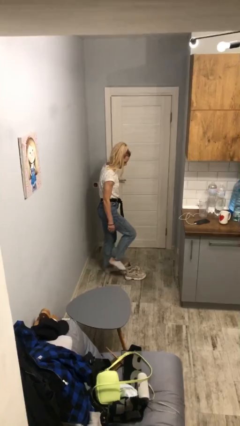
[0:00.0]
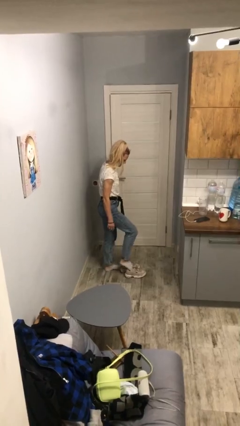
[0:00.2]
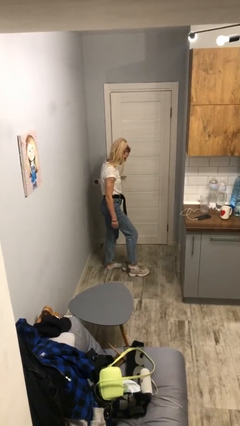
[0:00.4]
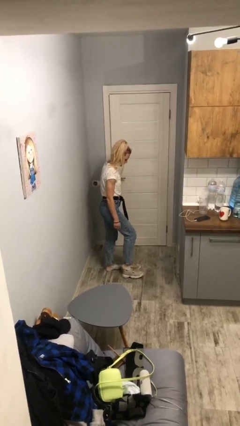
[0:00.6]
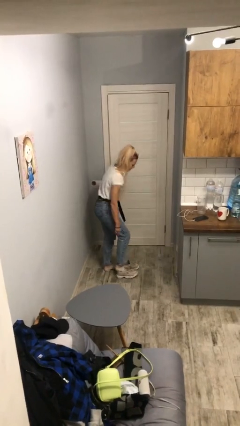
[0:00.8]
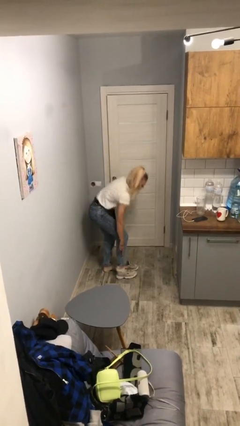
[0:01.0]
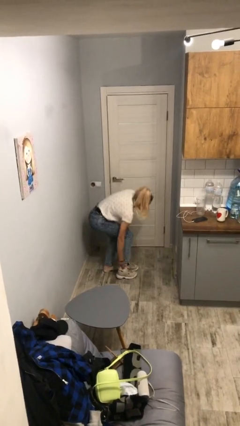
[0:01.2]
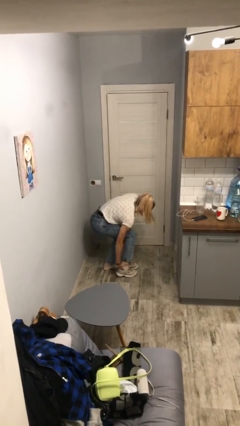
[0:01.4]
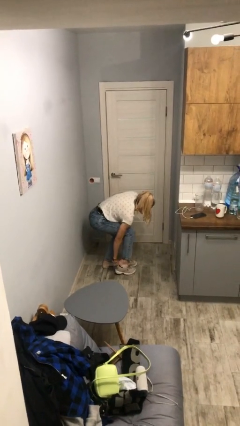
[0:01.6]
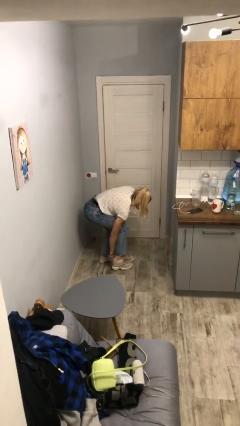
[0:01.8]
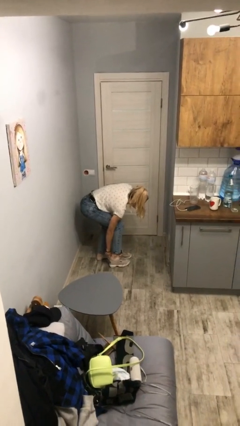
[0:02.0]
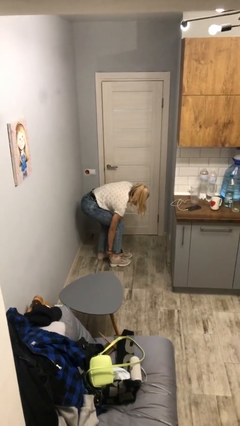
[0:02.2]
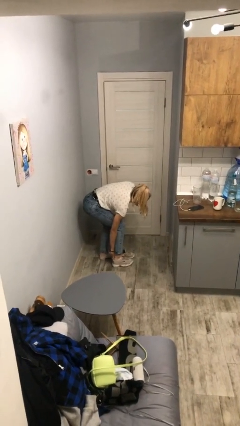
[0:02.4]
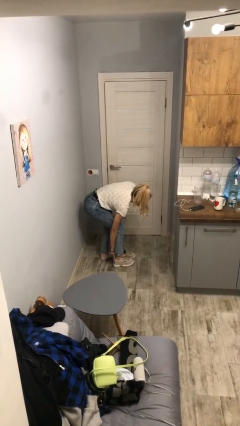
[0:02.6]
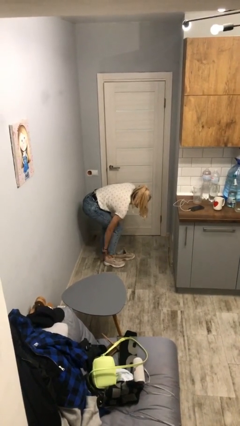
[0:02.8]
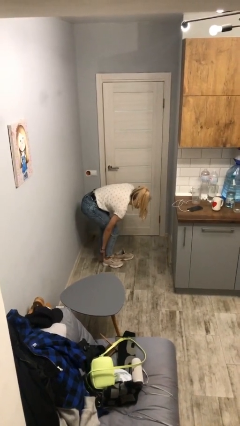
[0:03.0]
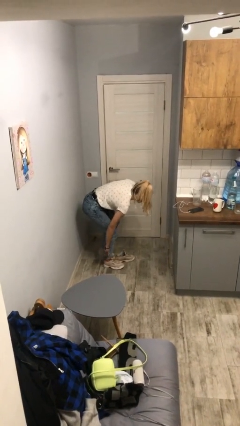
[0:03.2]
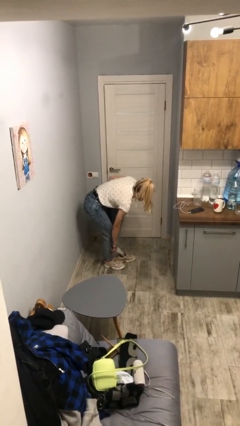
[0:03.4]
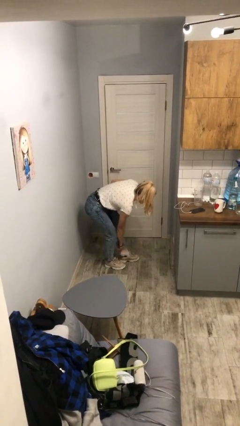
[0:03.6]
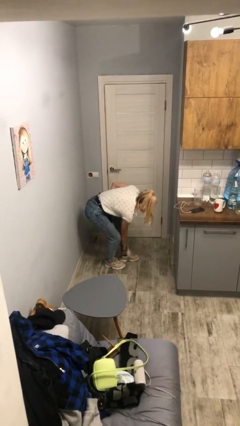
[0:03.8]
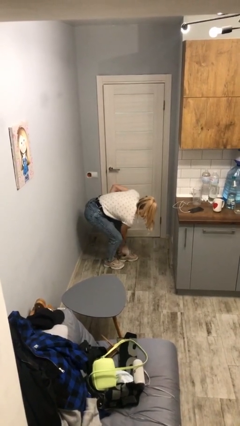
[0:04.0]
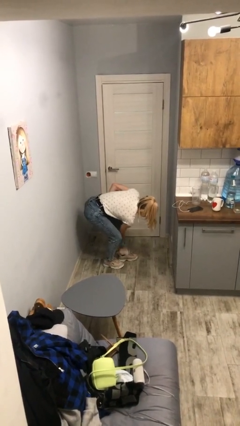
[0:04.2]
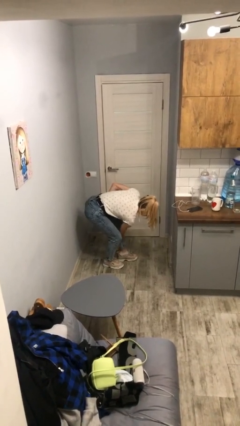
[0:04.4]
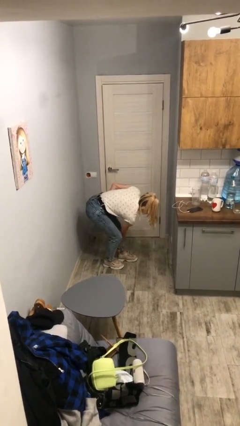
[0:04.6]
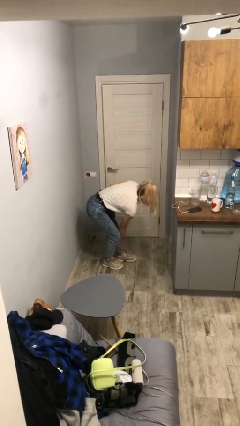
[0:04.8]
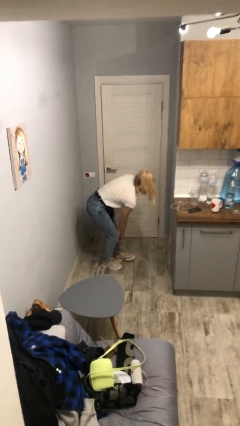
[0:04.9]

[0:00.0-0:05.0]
person puts on shoes

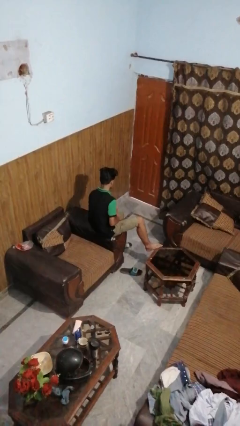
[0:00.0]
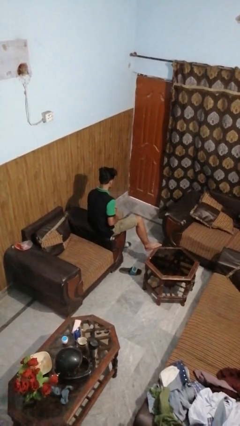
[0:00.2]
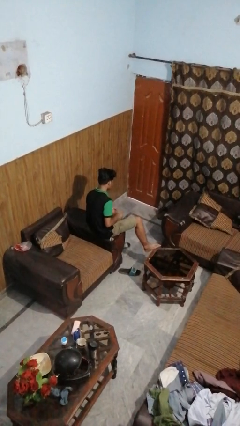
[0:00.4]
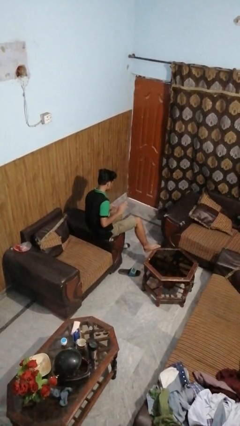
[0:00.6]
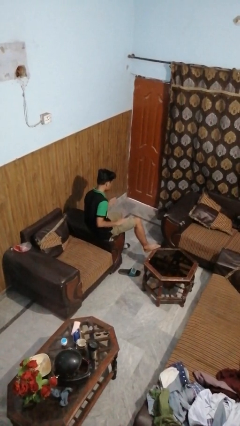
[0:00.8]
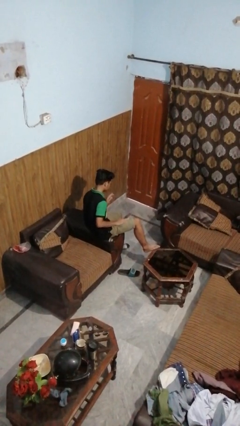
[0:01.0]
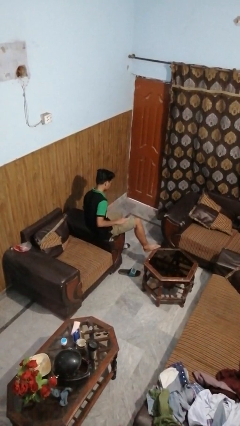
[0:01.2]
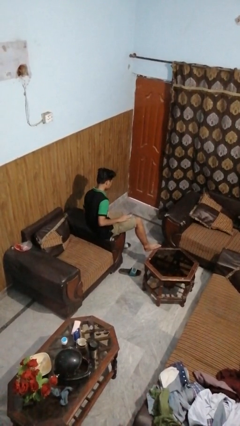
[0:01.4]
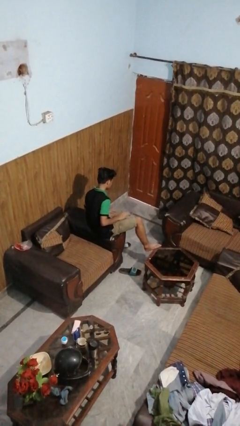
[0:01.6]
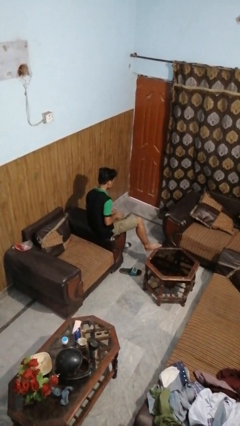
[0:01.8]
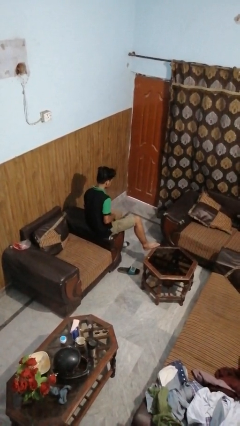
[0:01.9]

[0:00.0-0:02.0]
person slaps hands on thighs

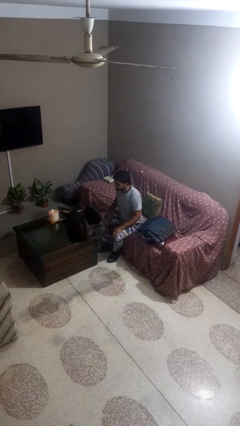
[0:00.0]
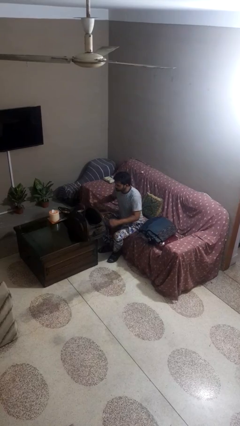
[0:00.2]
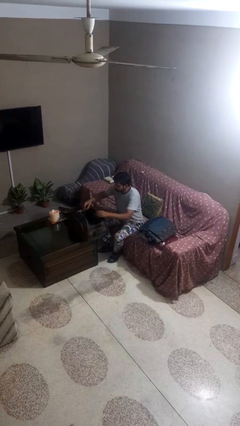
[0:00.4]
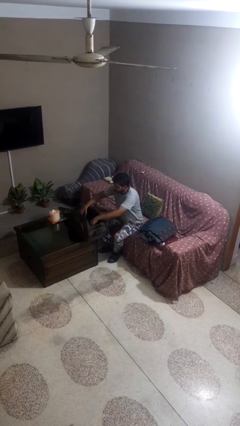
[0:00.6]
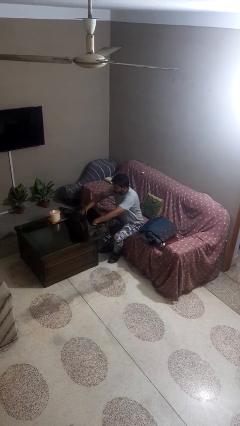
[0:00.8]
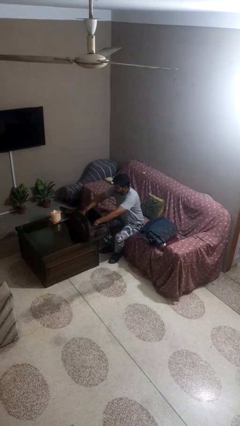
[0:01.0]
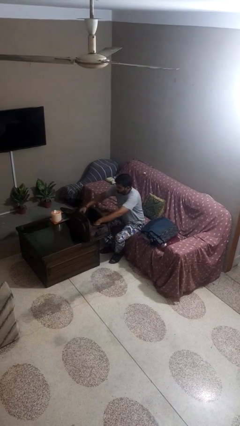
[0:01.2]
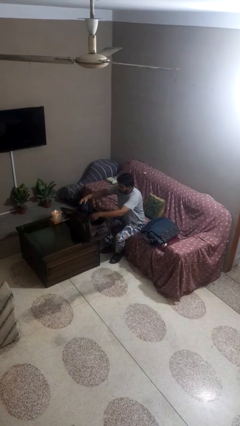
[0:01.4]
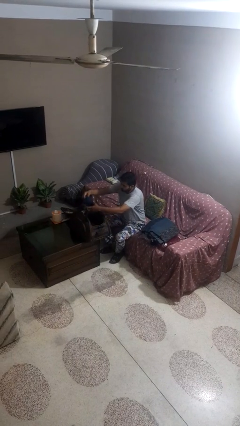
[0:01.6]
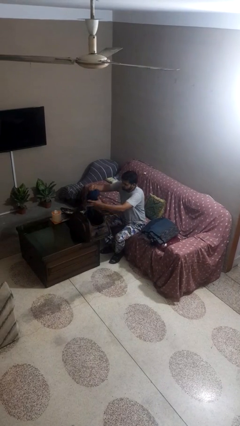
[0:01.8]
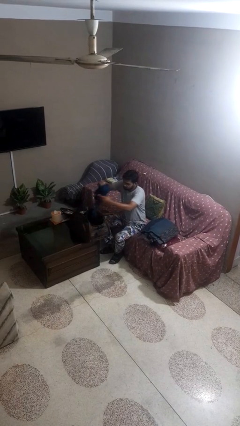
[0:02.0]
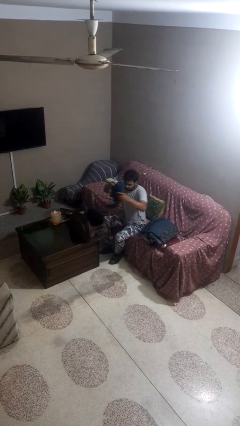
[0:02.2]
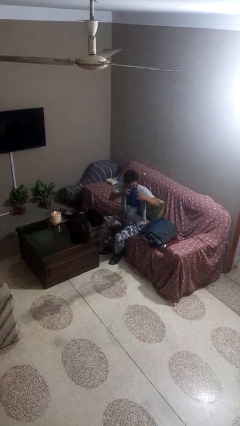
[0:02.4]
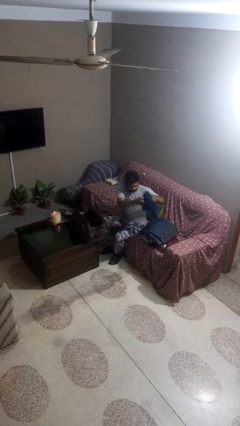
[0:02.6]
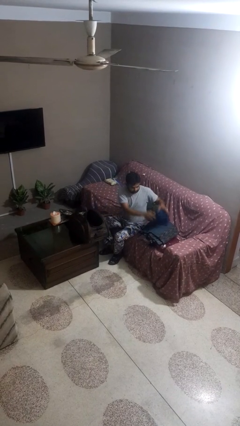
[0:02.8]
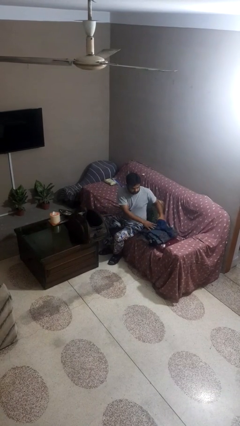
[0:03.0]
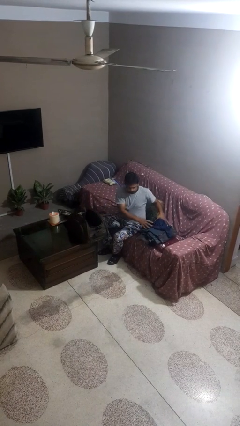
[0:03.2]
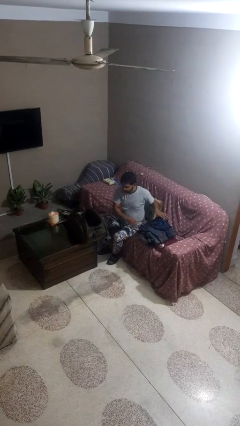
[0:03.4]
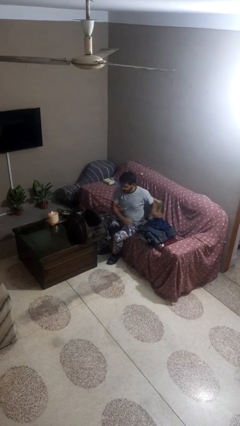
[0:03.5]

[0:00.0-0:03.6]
person unloads clothes from suitcase

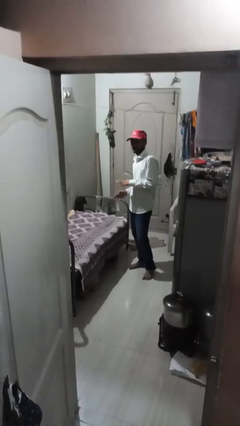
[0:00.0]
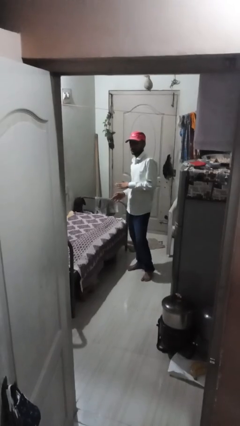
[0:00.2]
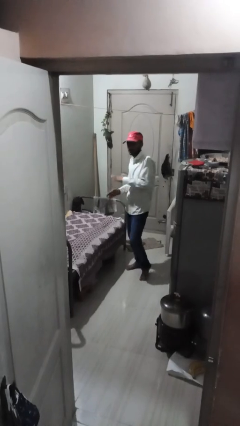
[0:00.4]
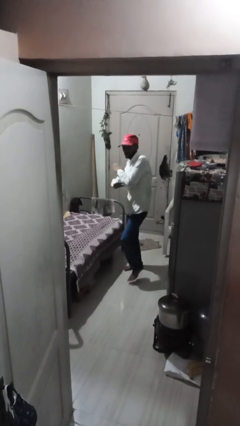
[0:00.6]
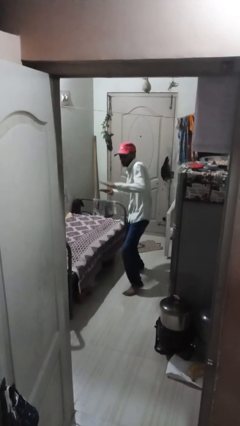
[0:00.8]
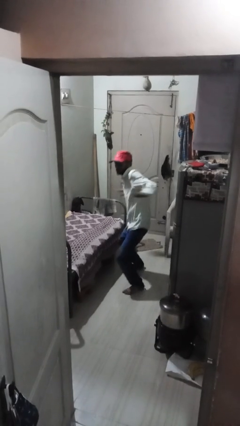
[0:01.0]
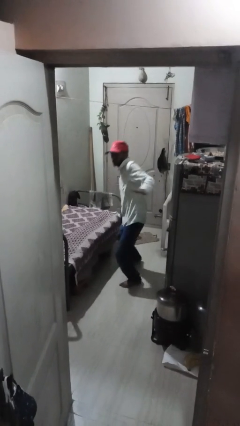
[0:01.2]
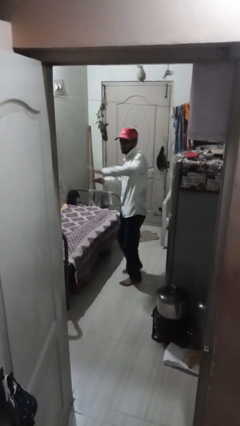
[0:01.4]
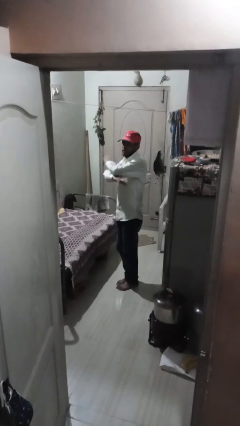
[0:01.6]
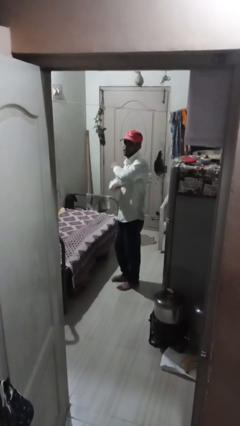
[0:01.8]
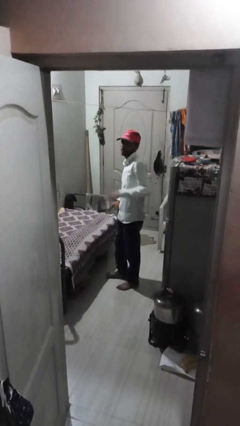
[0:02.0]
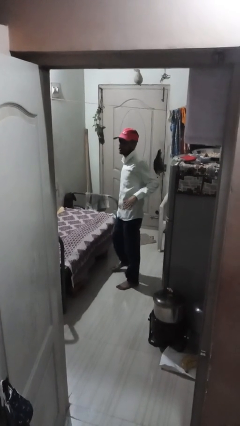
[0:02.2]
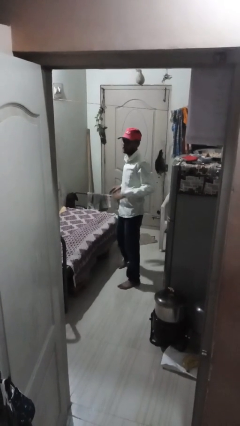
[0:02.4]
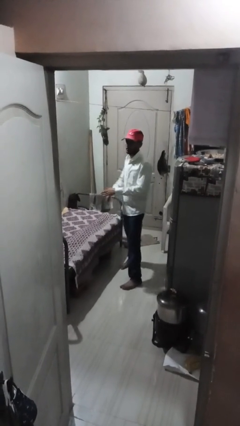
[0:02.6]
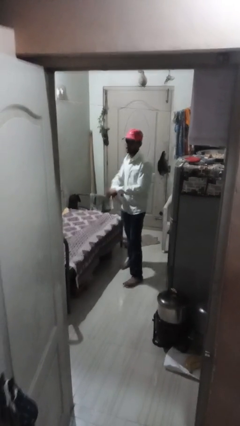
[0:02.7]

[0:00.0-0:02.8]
person karate chop

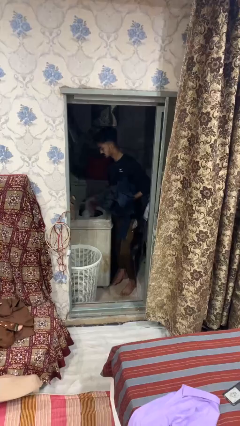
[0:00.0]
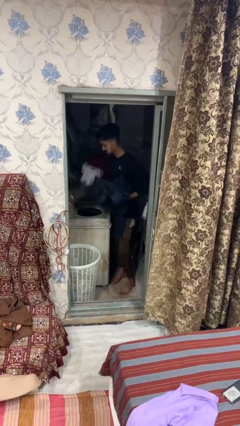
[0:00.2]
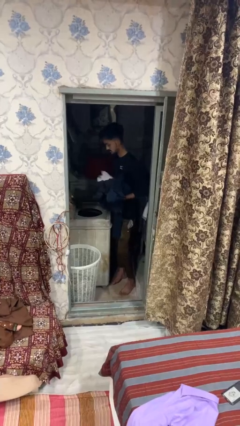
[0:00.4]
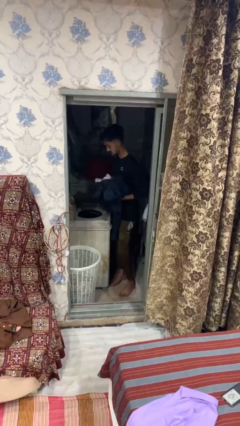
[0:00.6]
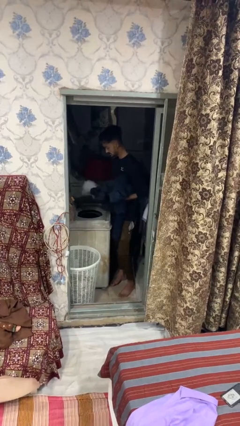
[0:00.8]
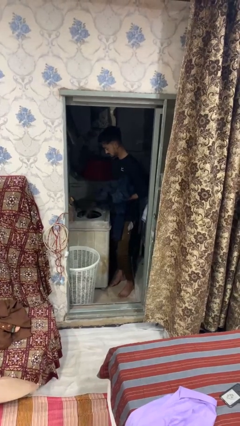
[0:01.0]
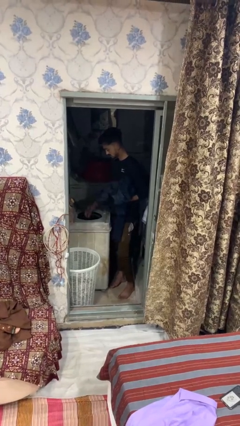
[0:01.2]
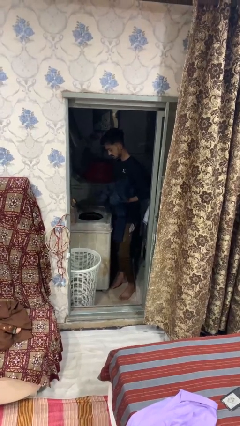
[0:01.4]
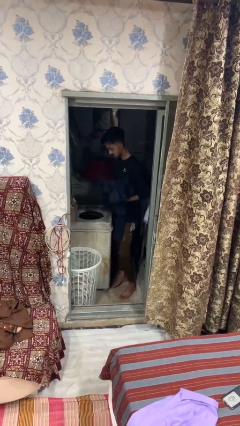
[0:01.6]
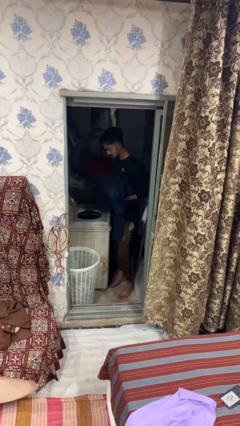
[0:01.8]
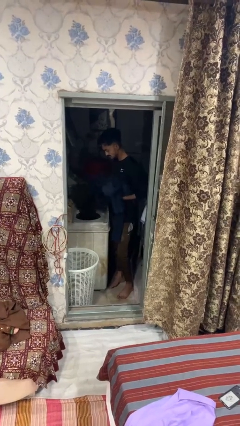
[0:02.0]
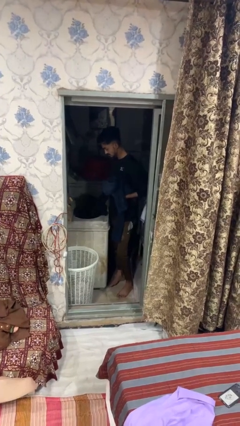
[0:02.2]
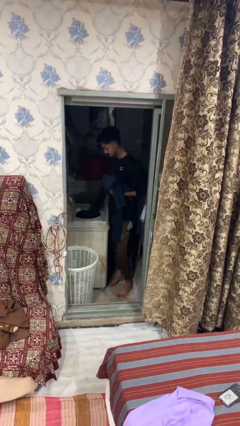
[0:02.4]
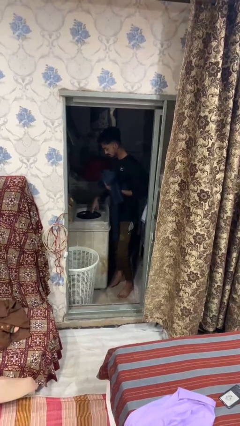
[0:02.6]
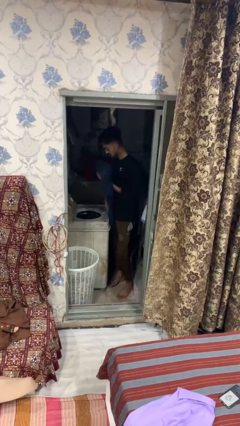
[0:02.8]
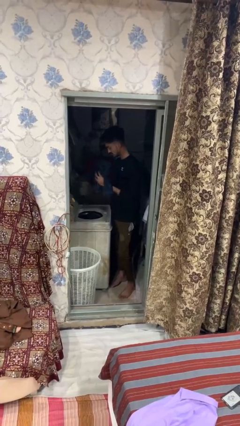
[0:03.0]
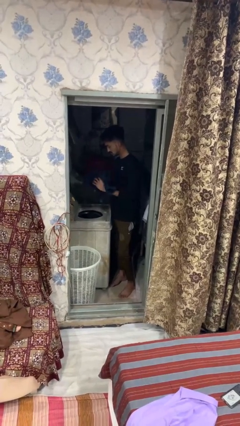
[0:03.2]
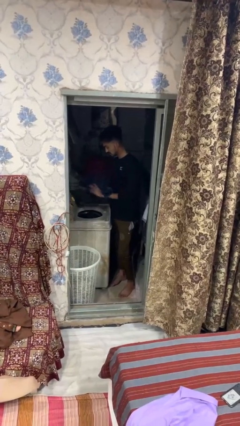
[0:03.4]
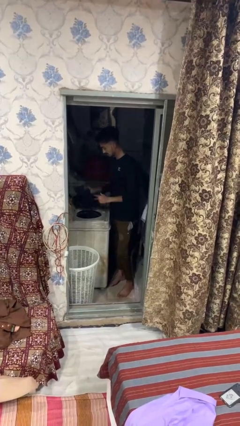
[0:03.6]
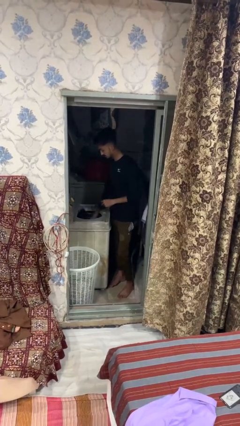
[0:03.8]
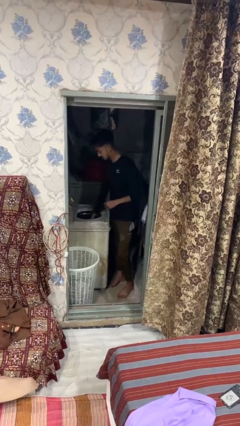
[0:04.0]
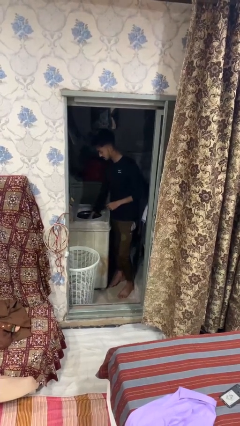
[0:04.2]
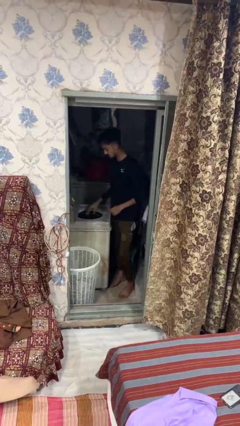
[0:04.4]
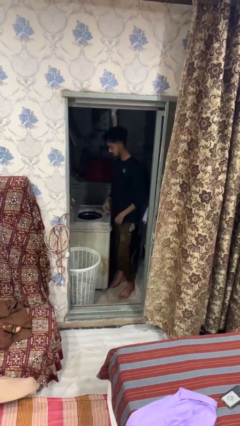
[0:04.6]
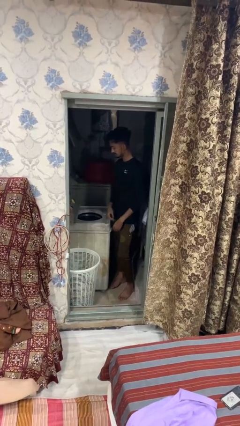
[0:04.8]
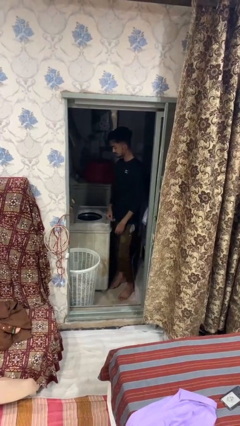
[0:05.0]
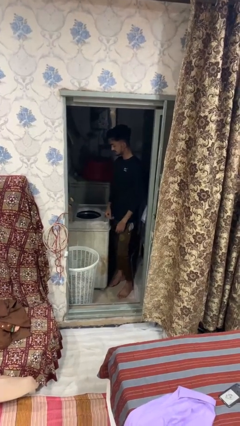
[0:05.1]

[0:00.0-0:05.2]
person loads clotheswasher
